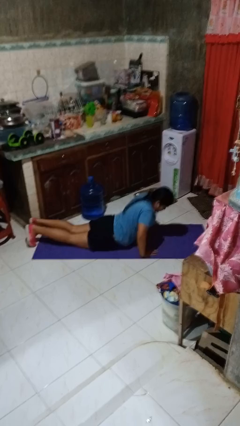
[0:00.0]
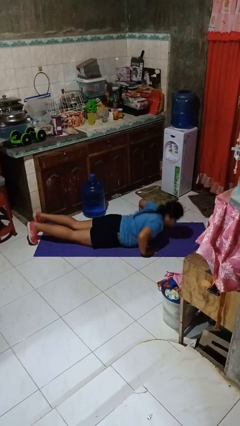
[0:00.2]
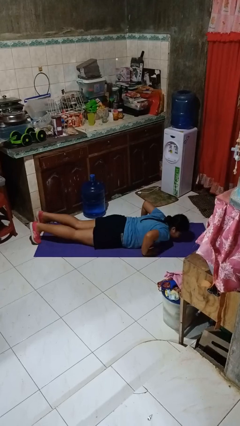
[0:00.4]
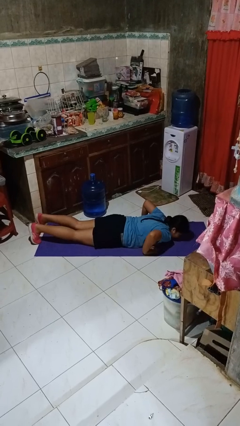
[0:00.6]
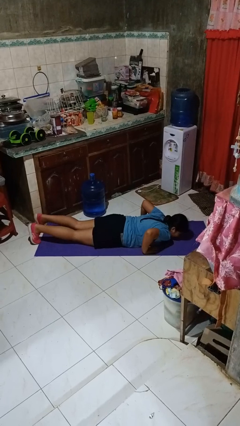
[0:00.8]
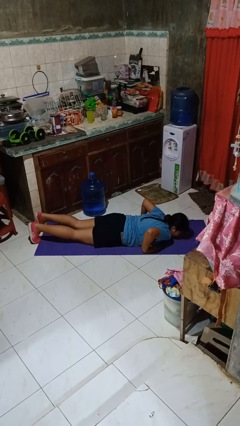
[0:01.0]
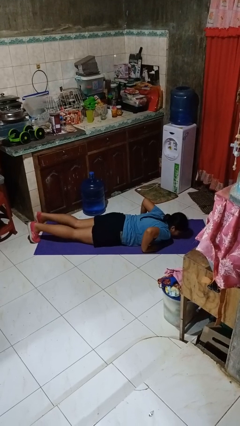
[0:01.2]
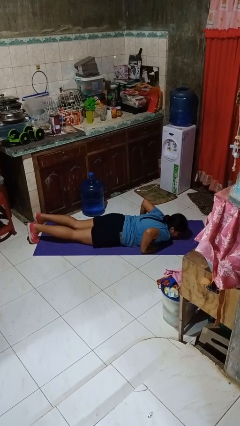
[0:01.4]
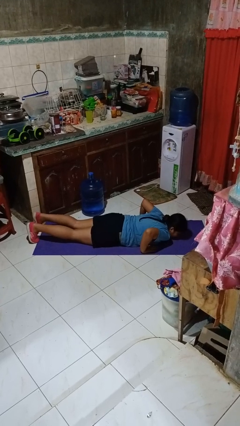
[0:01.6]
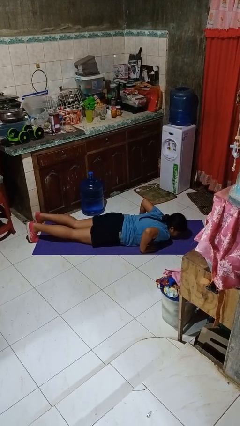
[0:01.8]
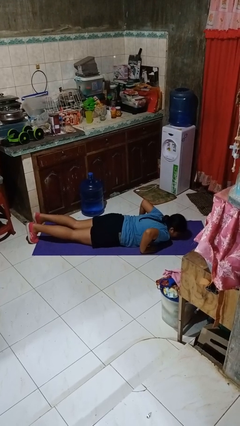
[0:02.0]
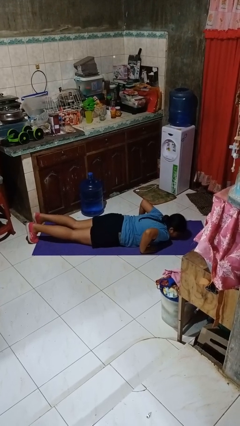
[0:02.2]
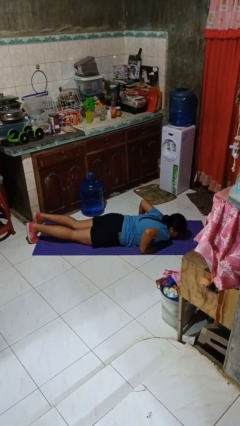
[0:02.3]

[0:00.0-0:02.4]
person exercises with pushup

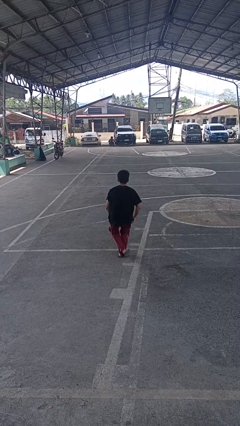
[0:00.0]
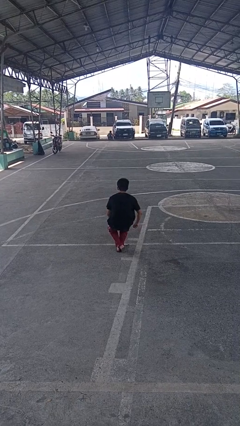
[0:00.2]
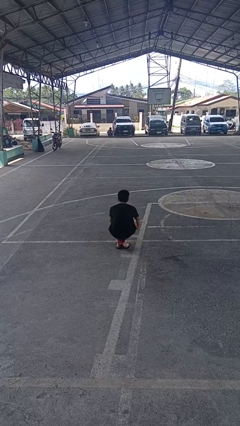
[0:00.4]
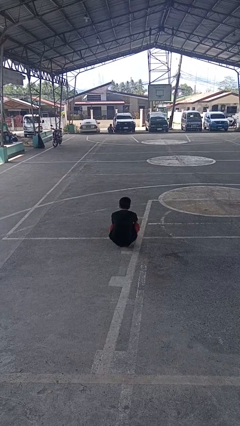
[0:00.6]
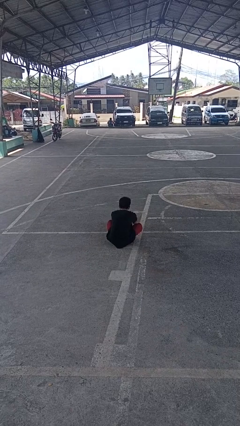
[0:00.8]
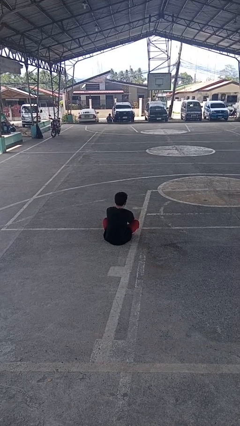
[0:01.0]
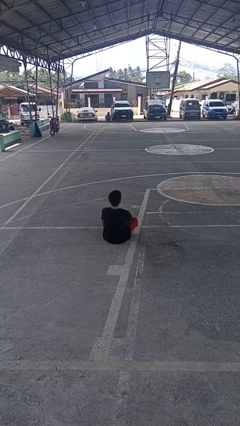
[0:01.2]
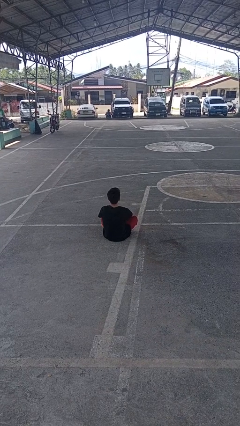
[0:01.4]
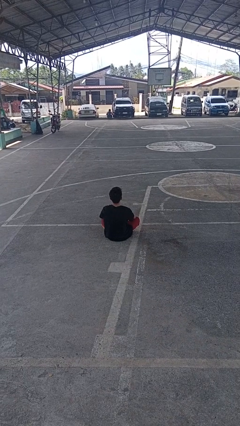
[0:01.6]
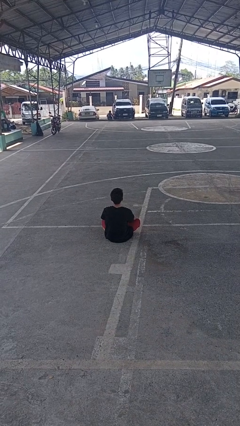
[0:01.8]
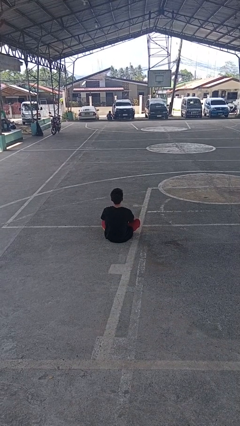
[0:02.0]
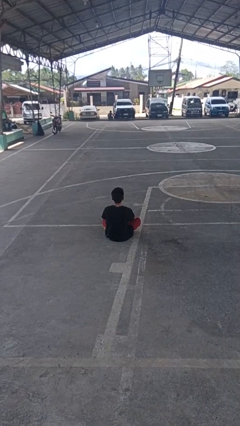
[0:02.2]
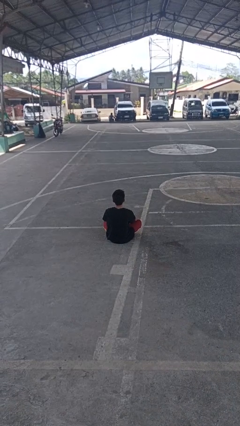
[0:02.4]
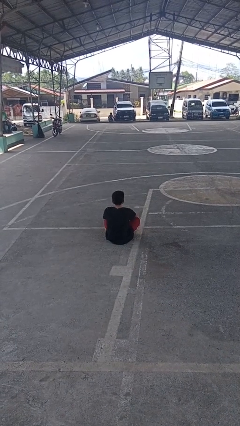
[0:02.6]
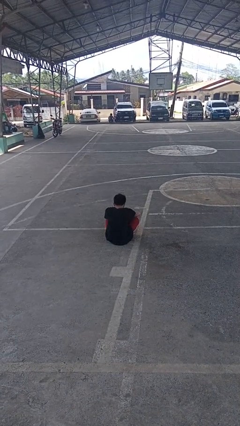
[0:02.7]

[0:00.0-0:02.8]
person sits crisscross

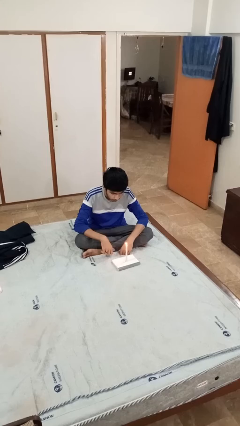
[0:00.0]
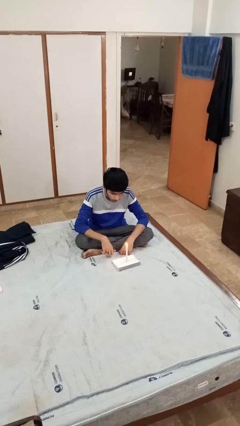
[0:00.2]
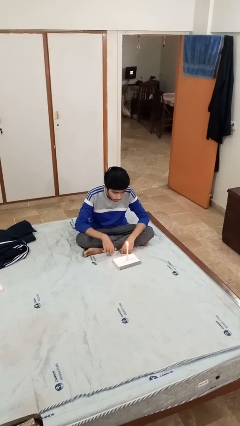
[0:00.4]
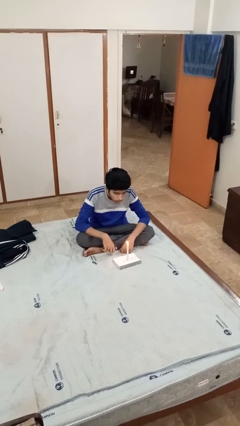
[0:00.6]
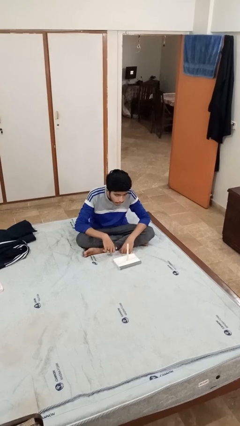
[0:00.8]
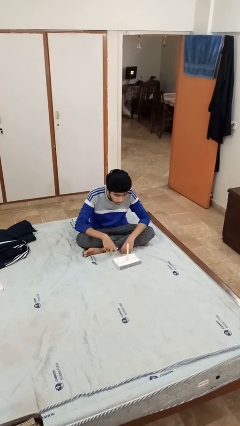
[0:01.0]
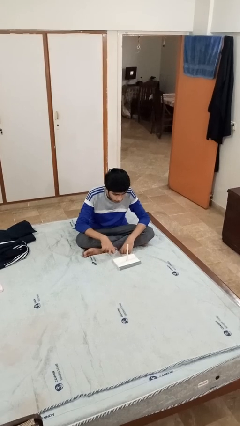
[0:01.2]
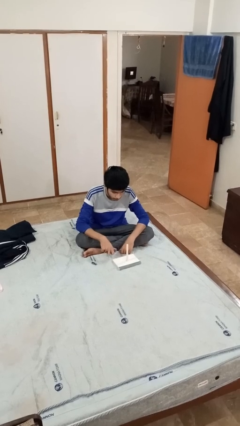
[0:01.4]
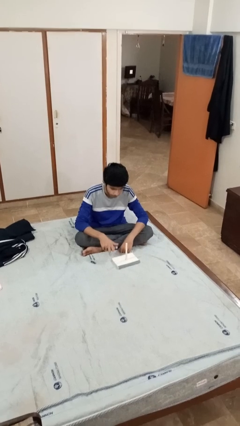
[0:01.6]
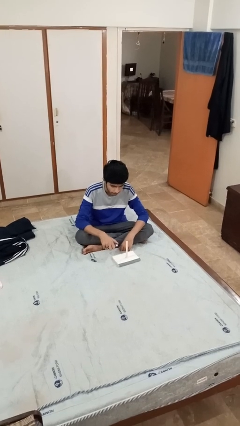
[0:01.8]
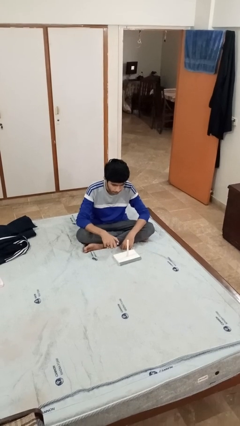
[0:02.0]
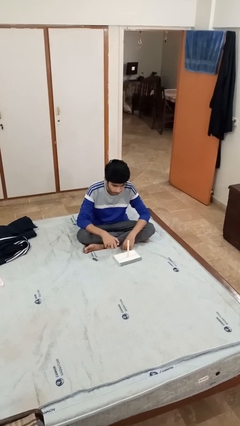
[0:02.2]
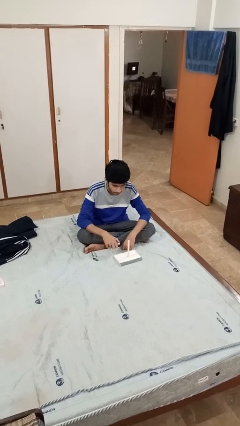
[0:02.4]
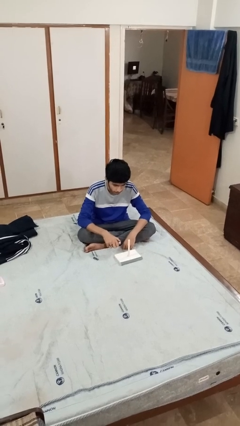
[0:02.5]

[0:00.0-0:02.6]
person extinguishes candle

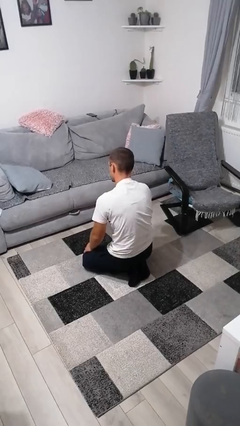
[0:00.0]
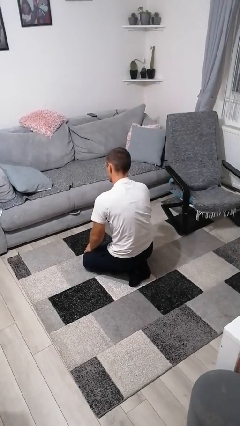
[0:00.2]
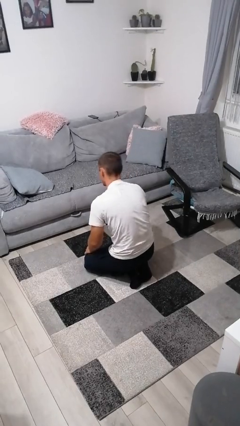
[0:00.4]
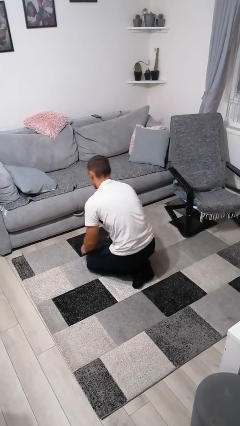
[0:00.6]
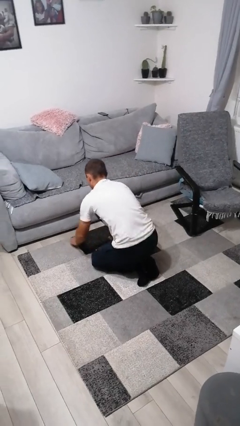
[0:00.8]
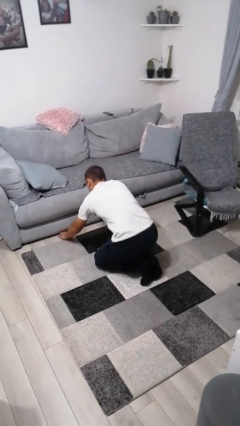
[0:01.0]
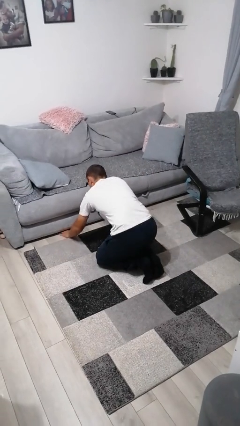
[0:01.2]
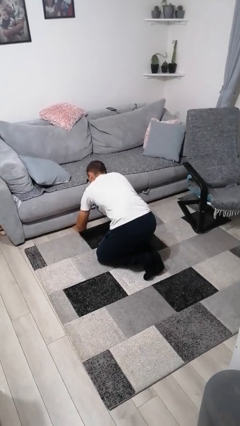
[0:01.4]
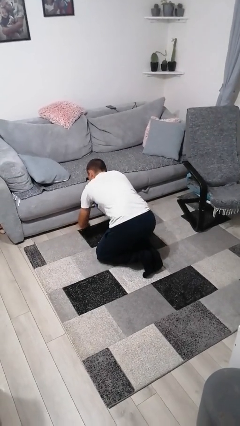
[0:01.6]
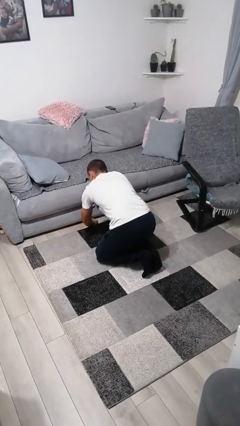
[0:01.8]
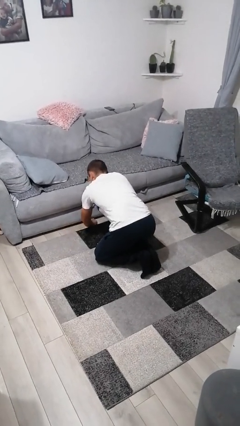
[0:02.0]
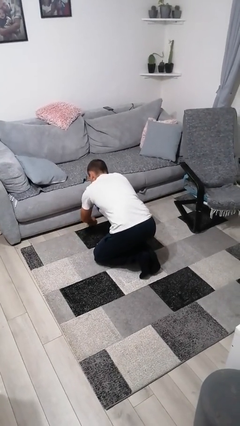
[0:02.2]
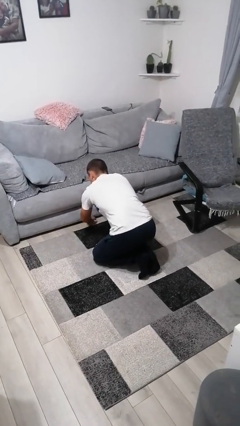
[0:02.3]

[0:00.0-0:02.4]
person searches under couch

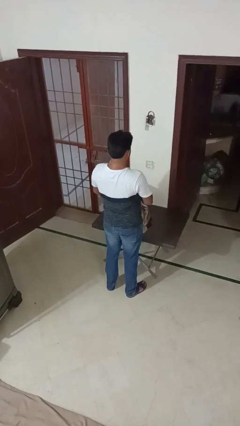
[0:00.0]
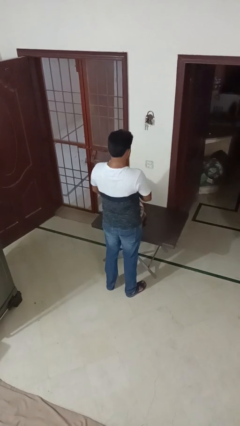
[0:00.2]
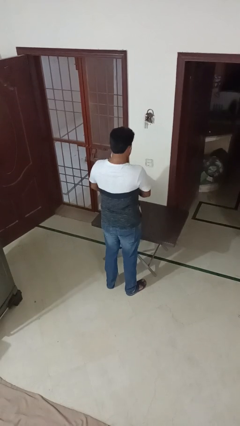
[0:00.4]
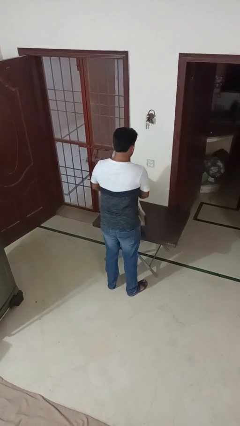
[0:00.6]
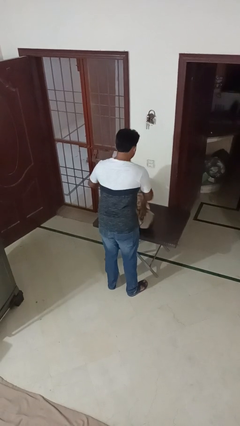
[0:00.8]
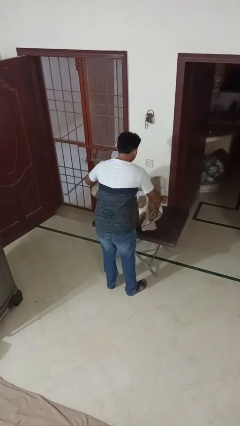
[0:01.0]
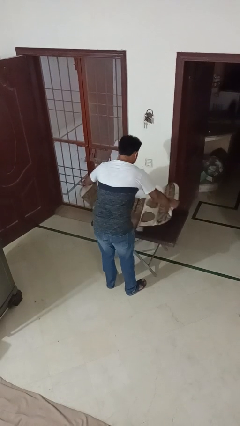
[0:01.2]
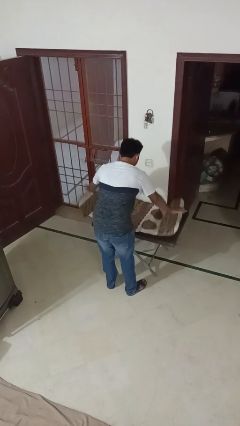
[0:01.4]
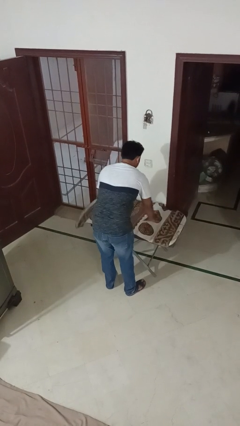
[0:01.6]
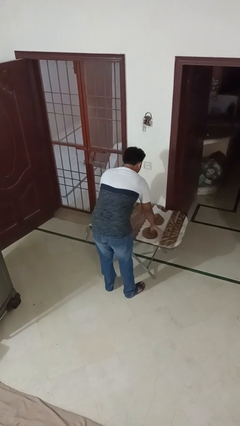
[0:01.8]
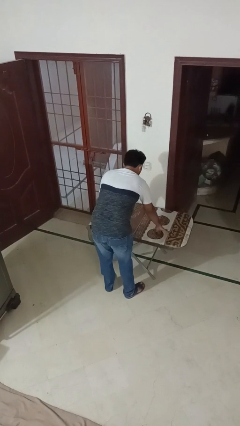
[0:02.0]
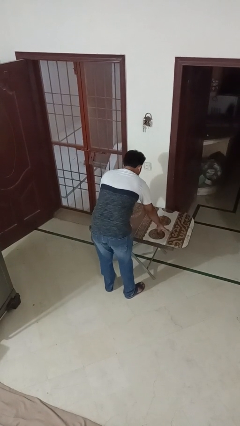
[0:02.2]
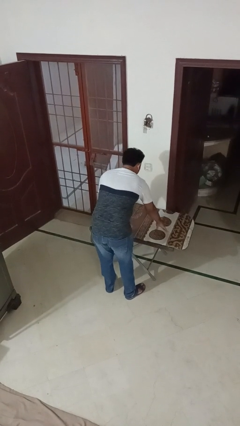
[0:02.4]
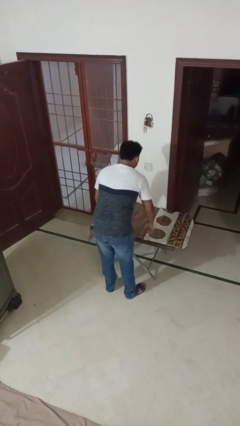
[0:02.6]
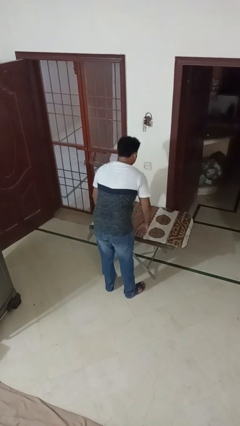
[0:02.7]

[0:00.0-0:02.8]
person spreads tablecloth

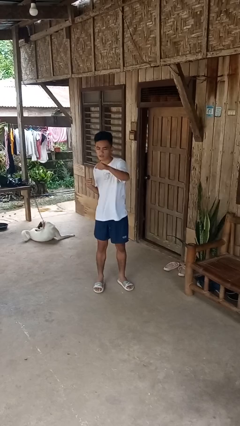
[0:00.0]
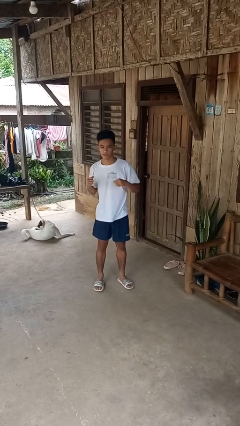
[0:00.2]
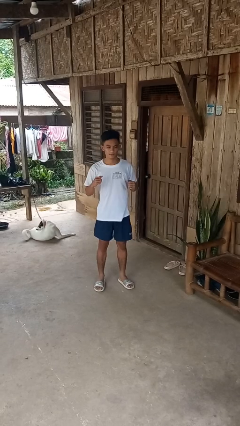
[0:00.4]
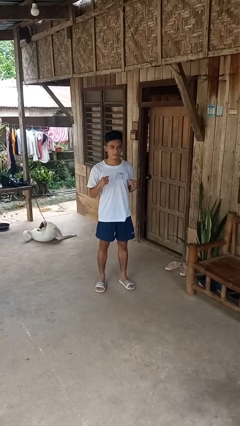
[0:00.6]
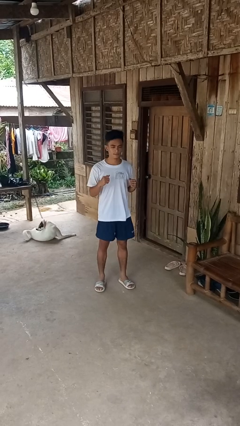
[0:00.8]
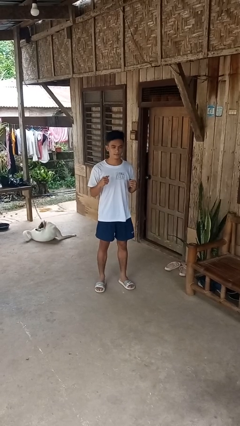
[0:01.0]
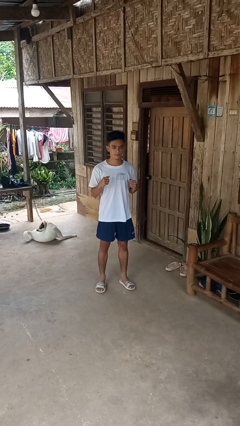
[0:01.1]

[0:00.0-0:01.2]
person punches

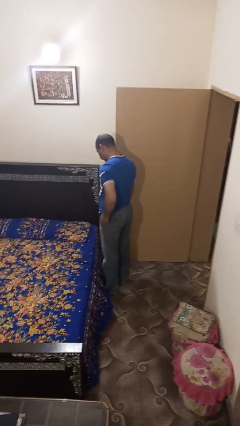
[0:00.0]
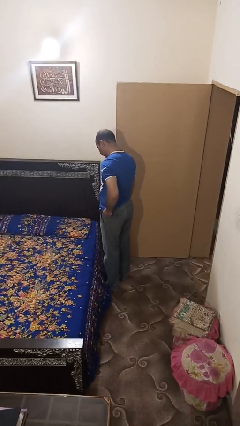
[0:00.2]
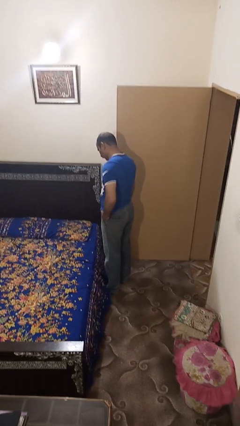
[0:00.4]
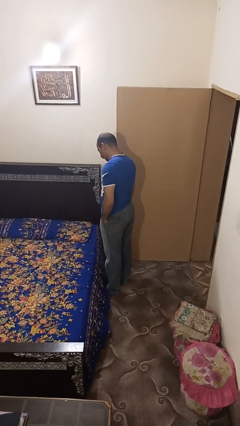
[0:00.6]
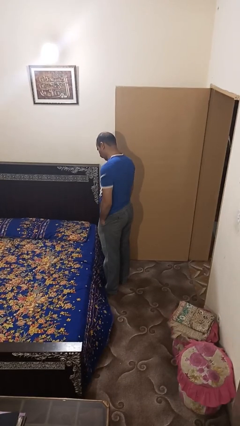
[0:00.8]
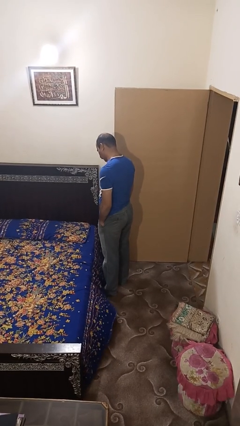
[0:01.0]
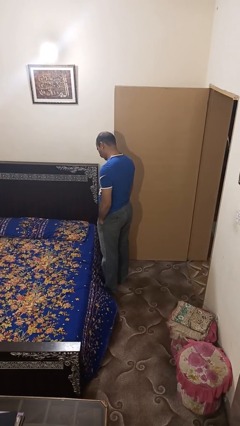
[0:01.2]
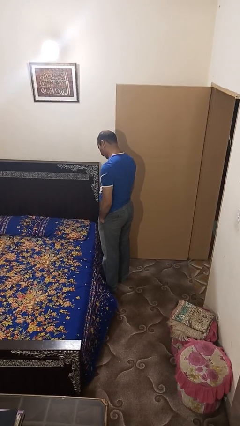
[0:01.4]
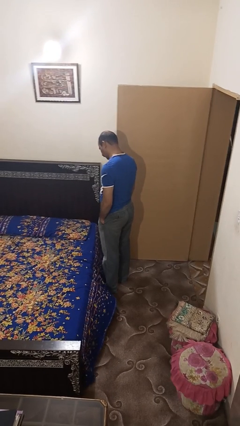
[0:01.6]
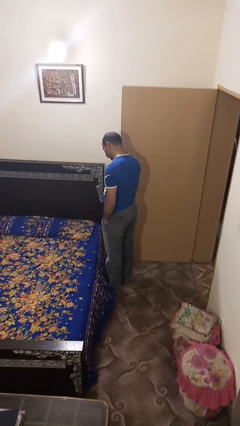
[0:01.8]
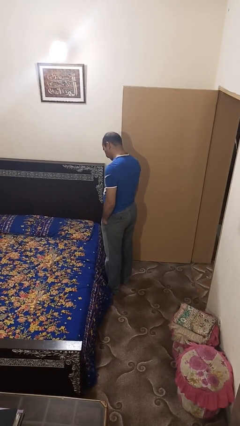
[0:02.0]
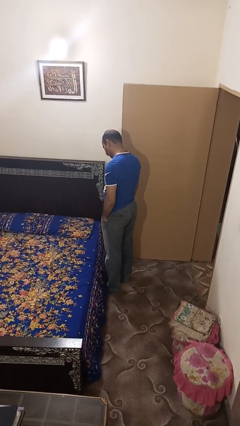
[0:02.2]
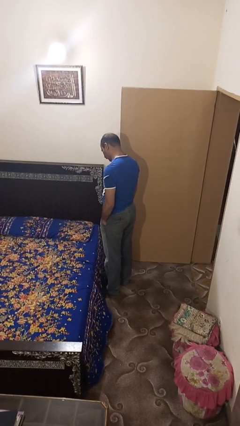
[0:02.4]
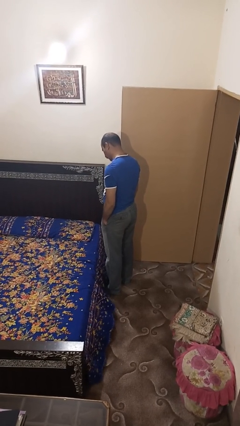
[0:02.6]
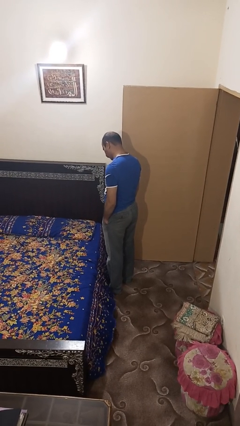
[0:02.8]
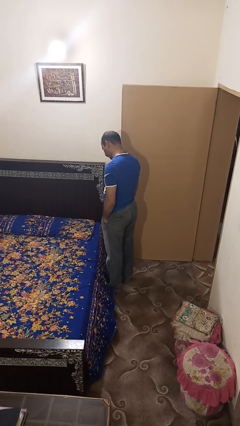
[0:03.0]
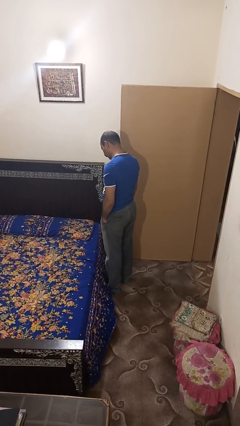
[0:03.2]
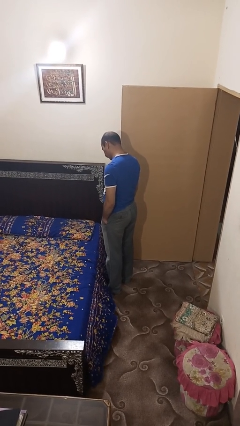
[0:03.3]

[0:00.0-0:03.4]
person puts hands in back pockets
